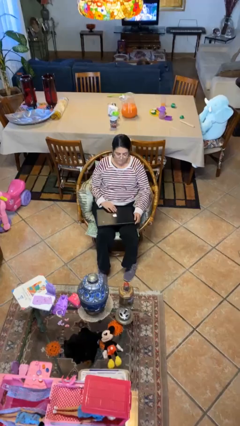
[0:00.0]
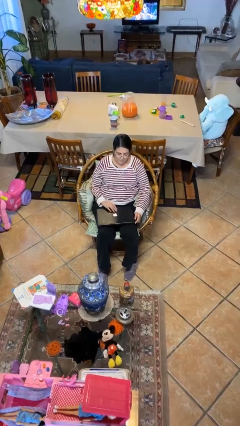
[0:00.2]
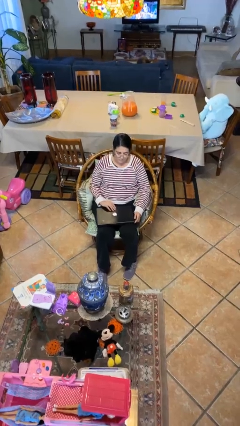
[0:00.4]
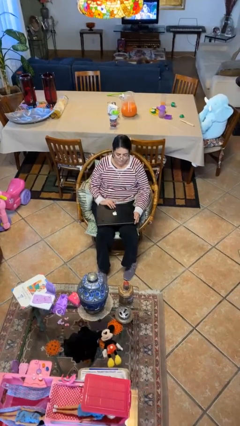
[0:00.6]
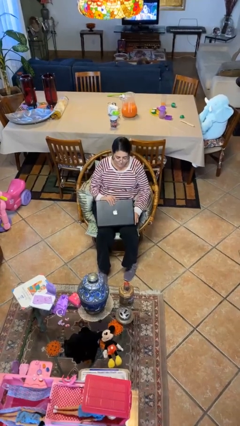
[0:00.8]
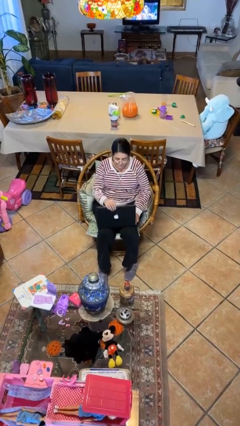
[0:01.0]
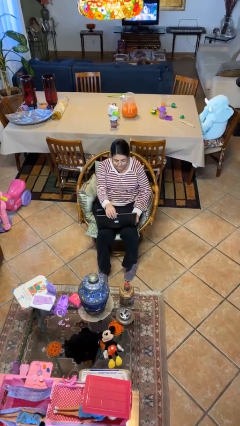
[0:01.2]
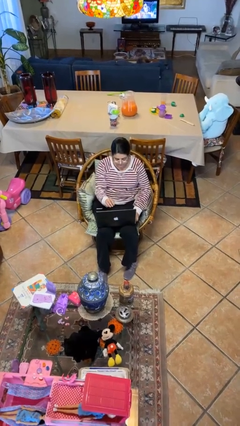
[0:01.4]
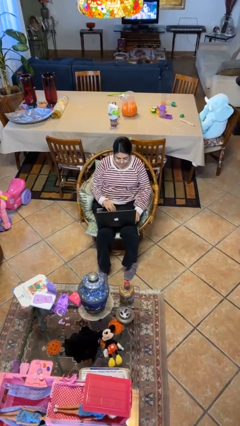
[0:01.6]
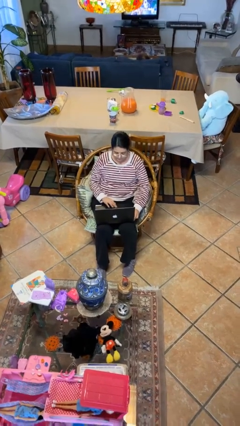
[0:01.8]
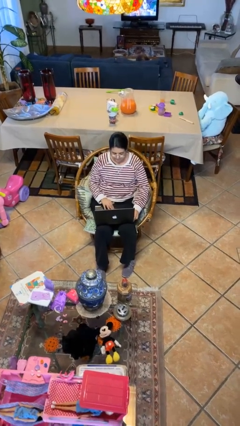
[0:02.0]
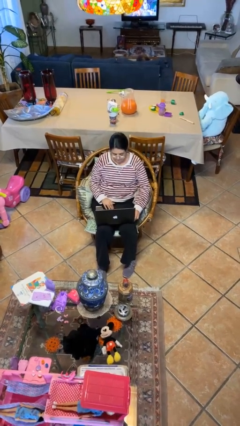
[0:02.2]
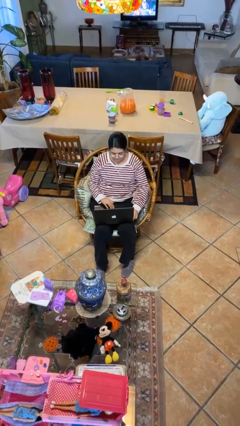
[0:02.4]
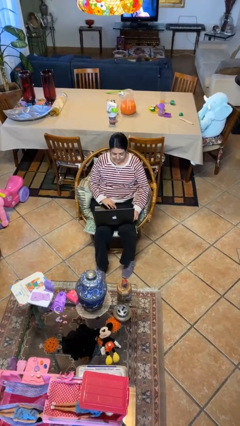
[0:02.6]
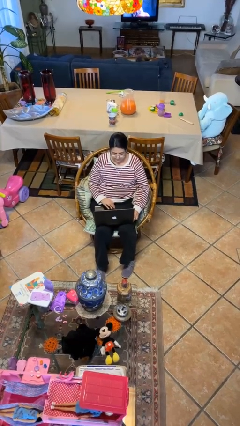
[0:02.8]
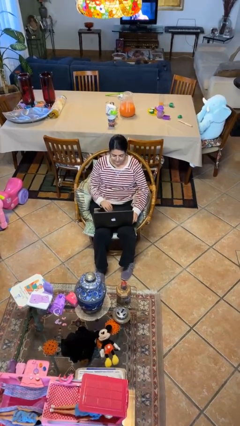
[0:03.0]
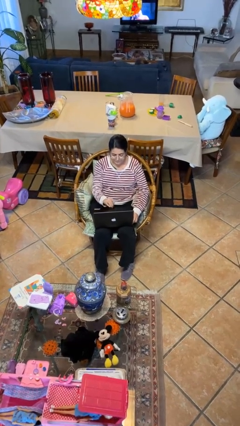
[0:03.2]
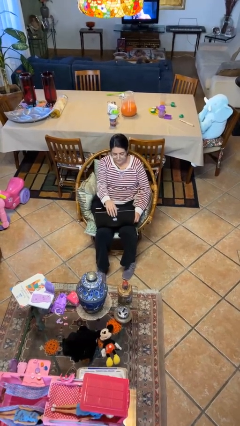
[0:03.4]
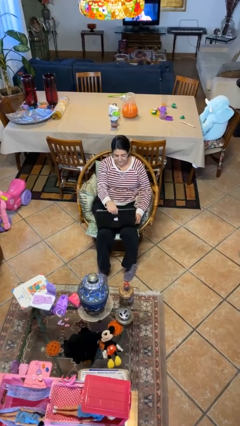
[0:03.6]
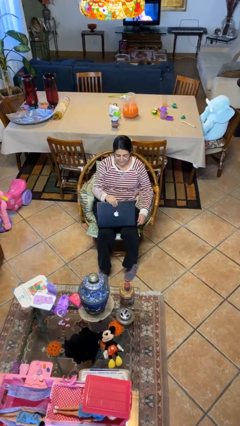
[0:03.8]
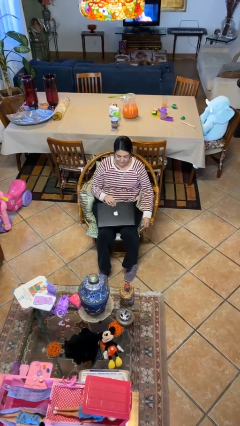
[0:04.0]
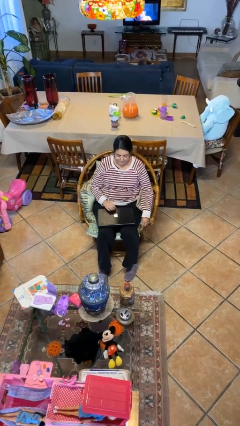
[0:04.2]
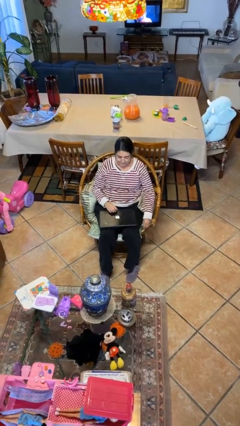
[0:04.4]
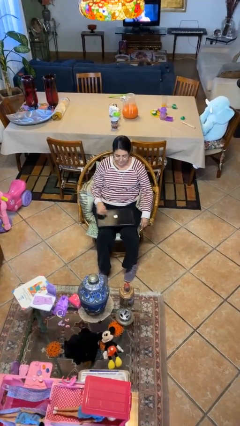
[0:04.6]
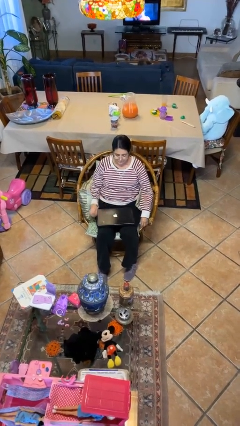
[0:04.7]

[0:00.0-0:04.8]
person interacts with laptop

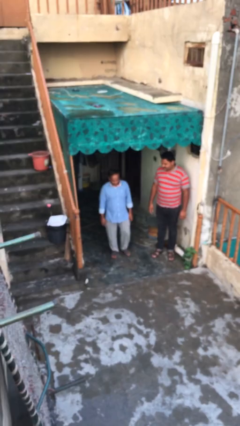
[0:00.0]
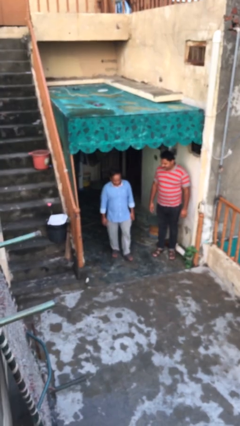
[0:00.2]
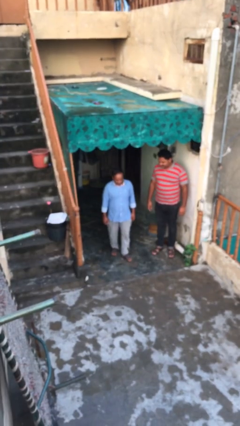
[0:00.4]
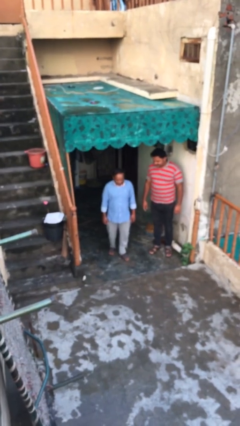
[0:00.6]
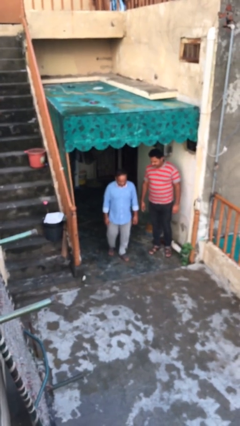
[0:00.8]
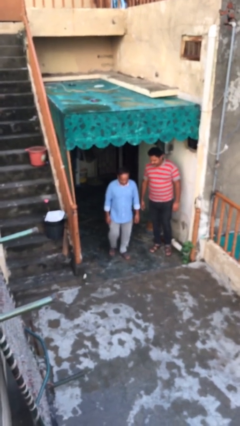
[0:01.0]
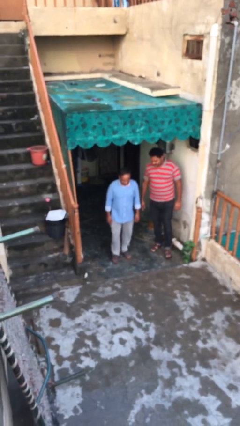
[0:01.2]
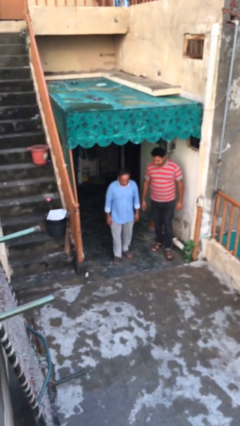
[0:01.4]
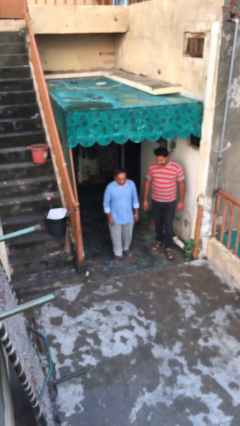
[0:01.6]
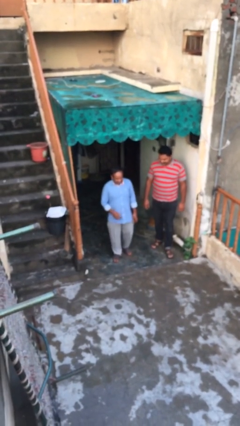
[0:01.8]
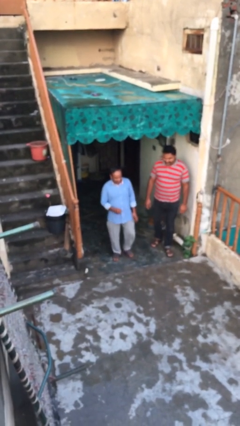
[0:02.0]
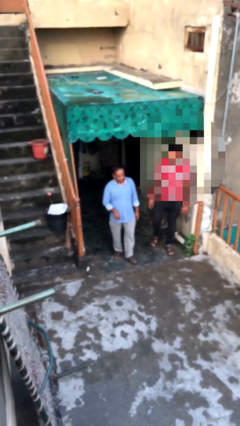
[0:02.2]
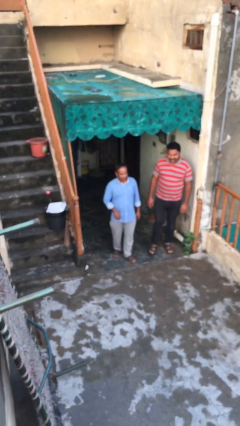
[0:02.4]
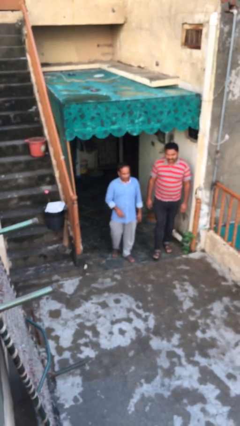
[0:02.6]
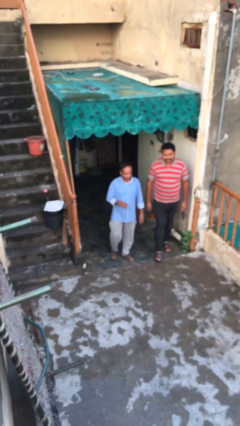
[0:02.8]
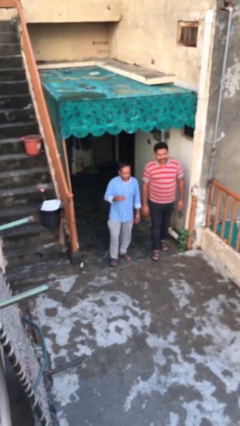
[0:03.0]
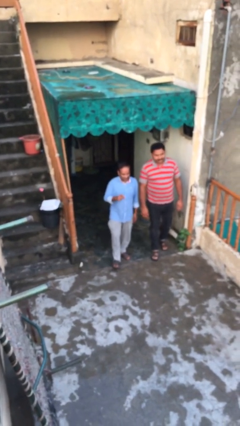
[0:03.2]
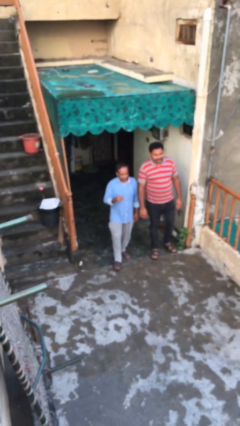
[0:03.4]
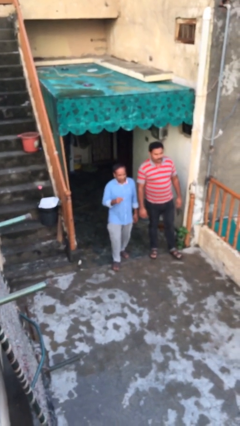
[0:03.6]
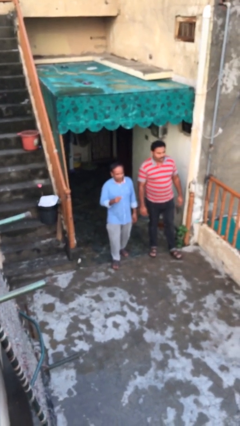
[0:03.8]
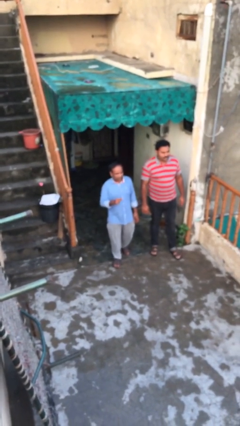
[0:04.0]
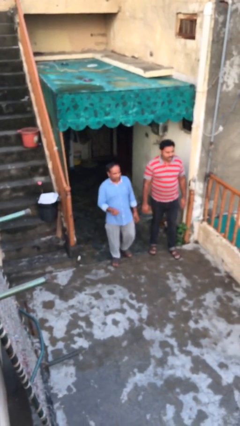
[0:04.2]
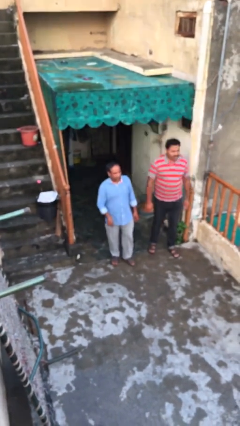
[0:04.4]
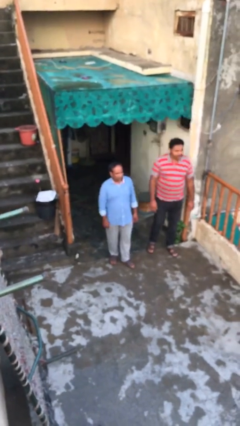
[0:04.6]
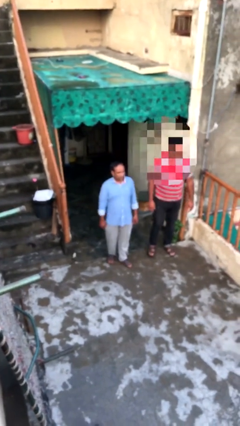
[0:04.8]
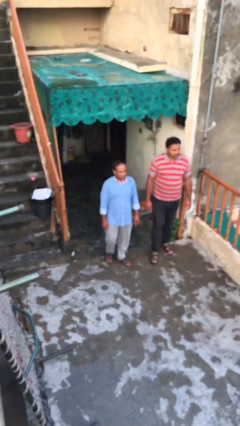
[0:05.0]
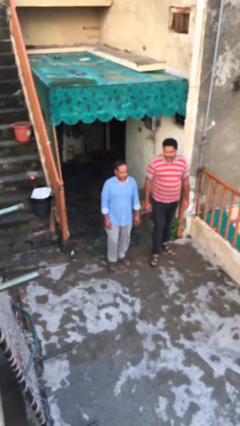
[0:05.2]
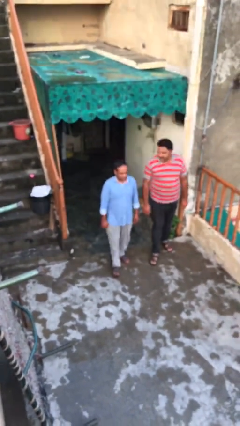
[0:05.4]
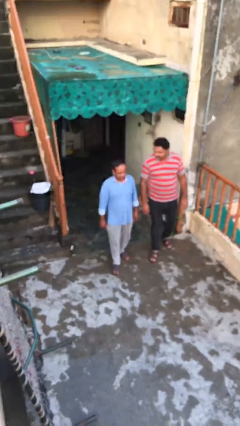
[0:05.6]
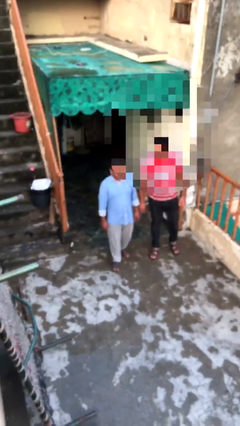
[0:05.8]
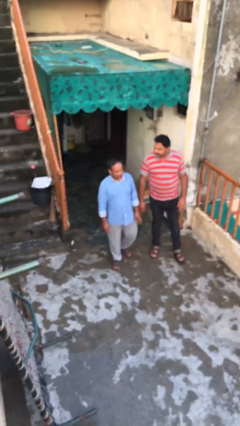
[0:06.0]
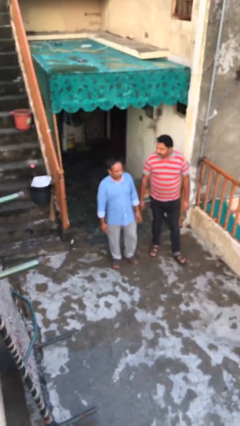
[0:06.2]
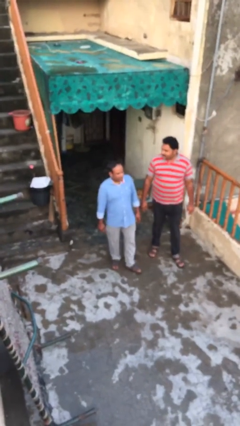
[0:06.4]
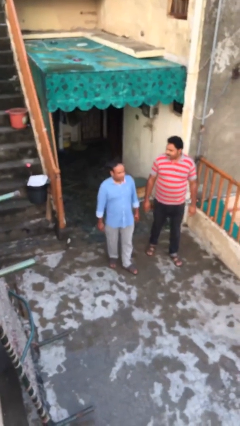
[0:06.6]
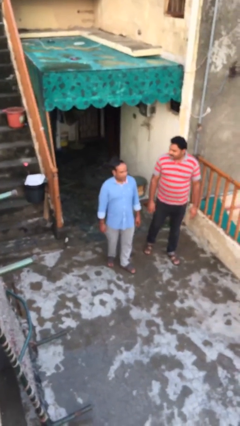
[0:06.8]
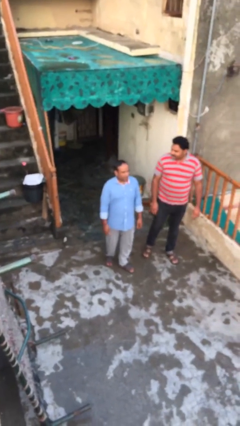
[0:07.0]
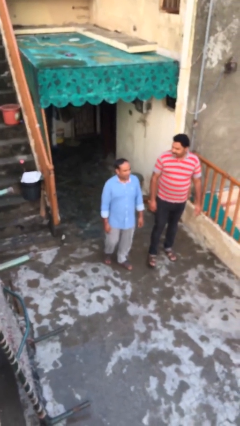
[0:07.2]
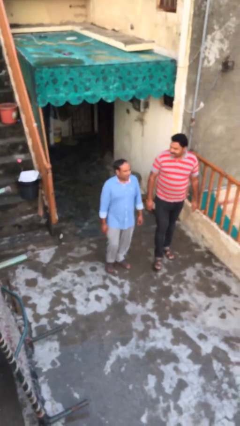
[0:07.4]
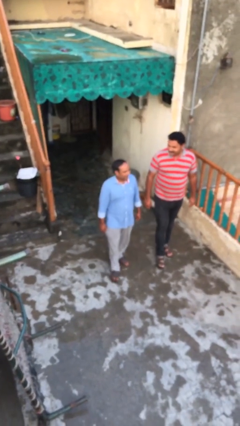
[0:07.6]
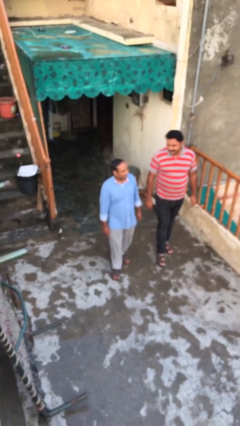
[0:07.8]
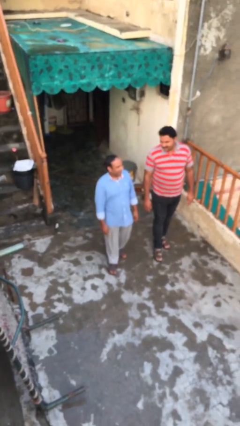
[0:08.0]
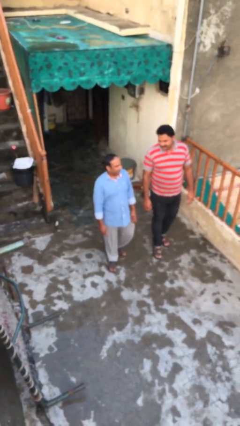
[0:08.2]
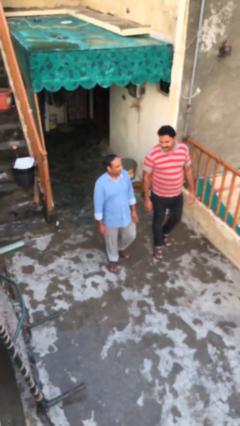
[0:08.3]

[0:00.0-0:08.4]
person talks to person

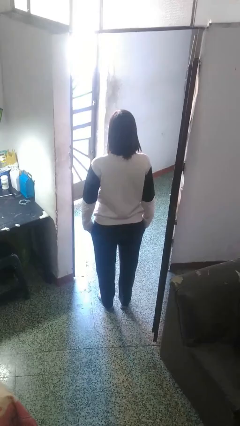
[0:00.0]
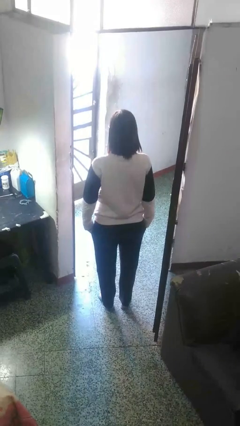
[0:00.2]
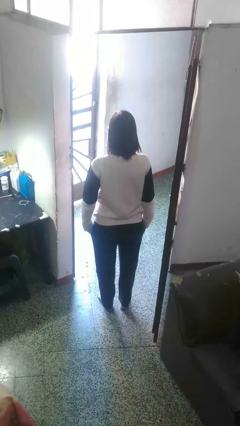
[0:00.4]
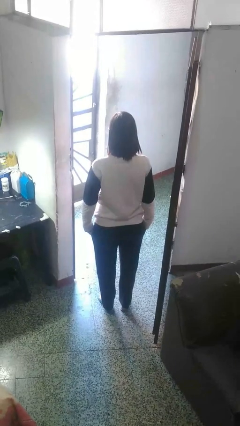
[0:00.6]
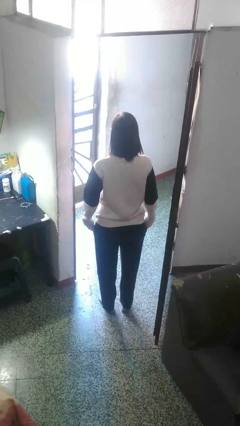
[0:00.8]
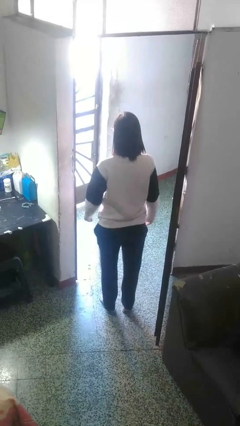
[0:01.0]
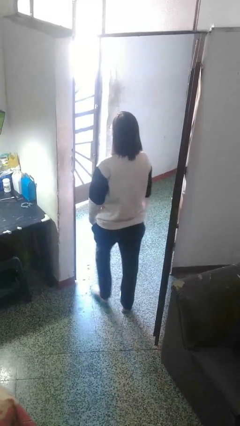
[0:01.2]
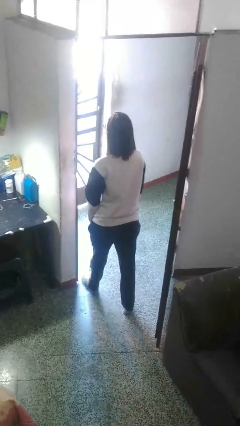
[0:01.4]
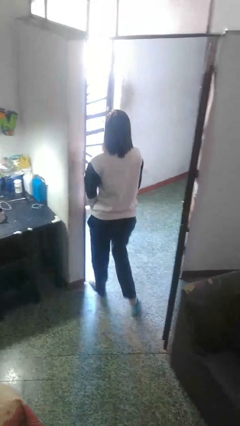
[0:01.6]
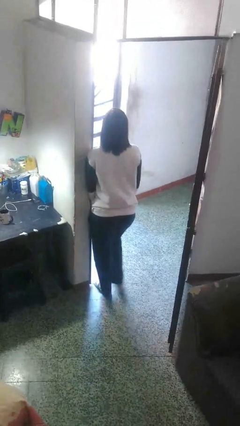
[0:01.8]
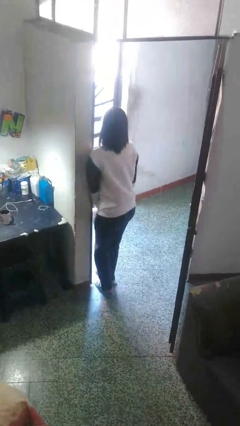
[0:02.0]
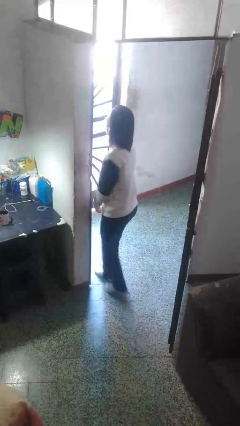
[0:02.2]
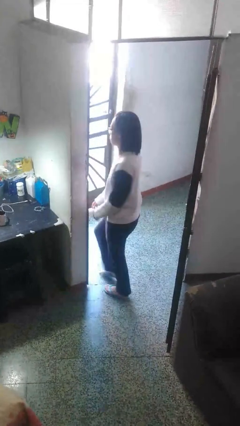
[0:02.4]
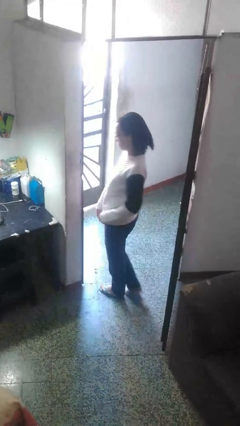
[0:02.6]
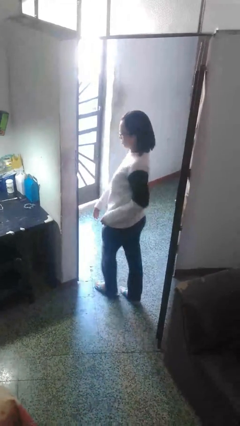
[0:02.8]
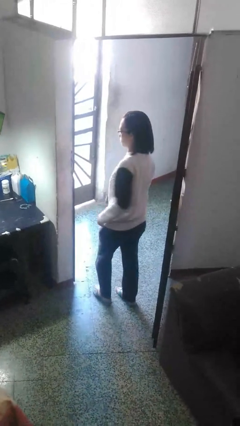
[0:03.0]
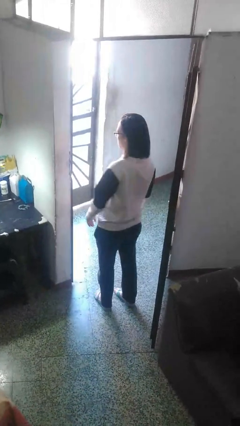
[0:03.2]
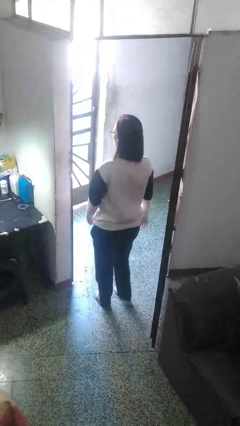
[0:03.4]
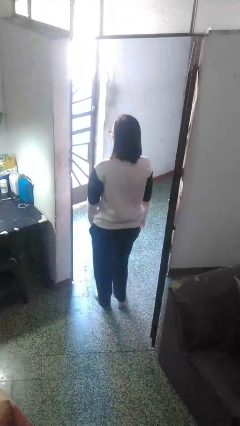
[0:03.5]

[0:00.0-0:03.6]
person bumps into wall

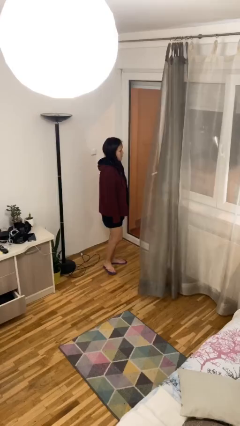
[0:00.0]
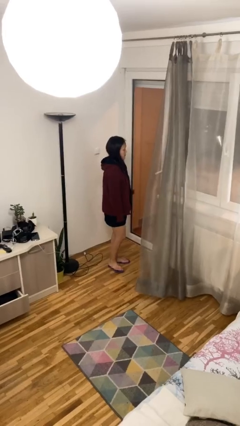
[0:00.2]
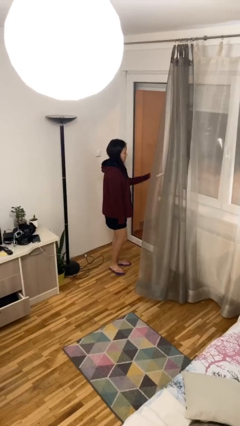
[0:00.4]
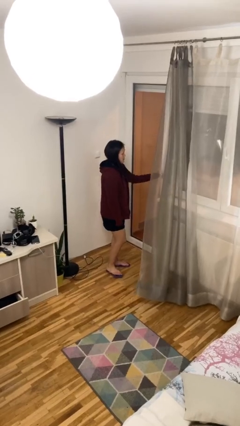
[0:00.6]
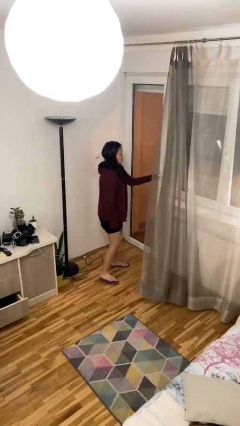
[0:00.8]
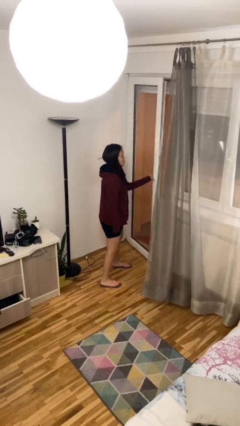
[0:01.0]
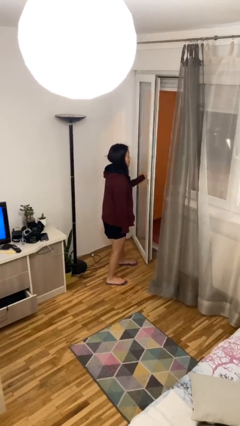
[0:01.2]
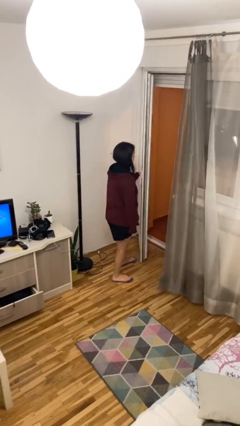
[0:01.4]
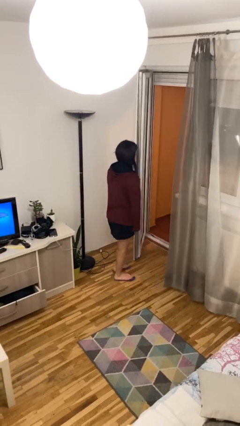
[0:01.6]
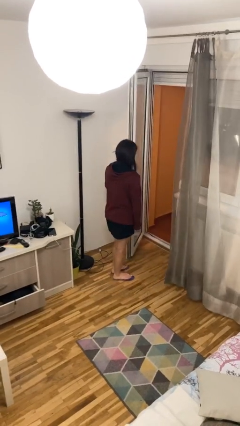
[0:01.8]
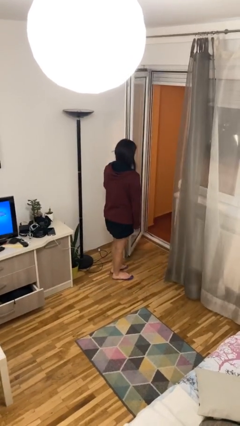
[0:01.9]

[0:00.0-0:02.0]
person opens facility door
